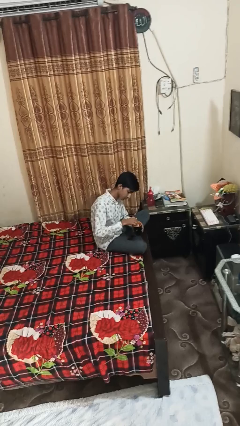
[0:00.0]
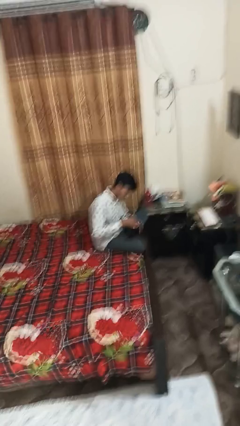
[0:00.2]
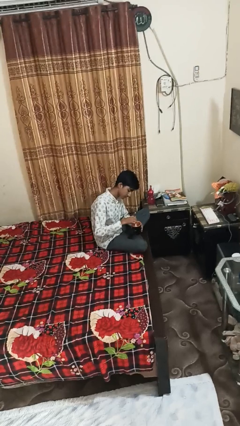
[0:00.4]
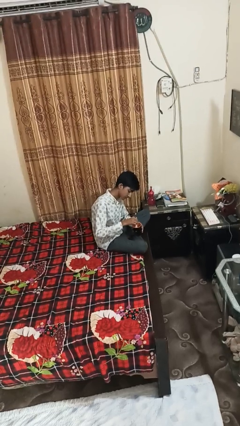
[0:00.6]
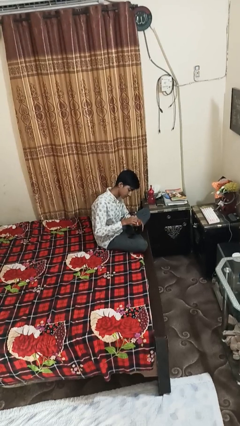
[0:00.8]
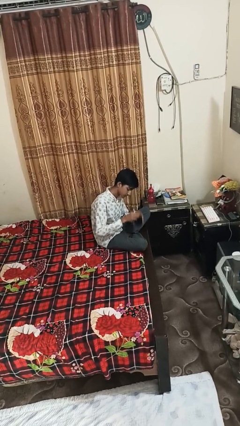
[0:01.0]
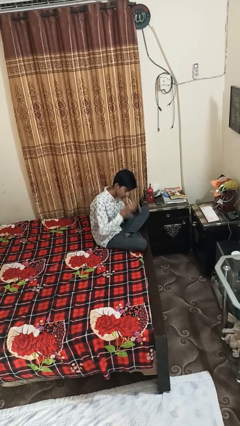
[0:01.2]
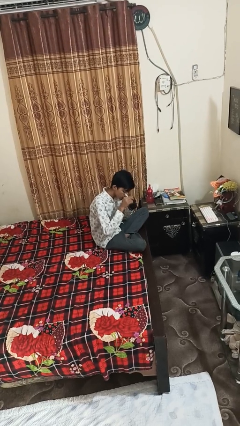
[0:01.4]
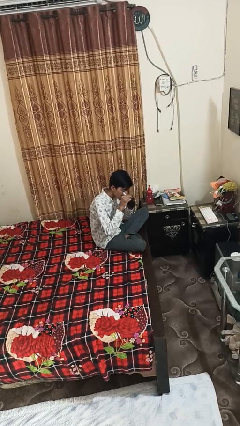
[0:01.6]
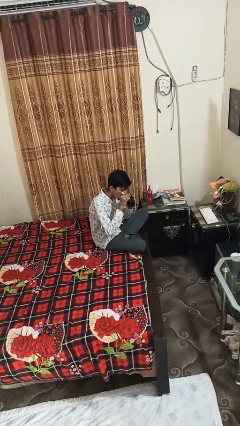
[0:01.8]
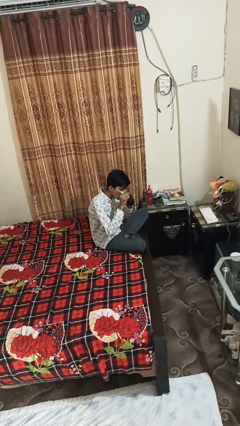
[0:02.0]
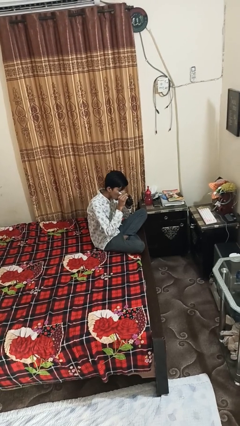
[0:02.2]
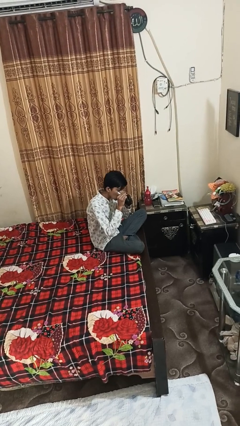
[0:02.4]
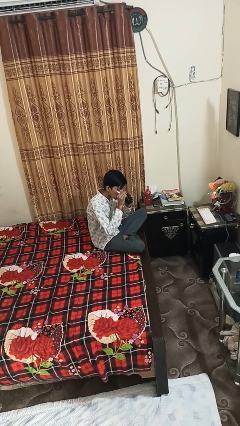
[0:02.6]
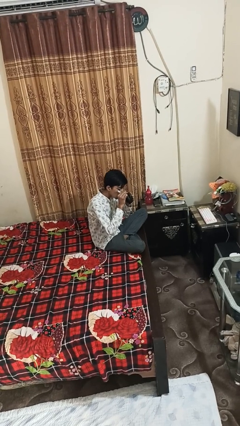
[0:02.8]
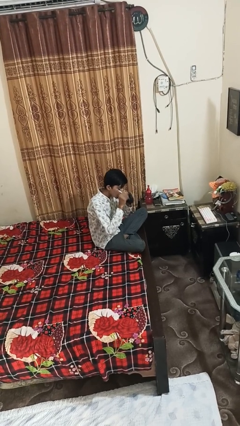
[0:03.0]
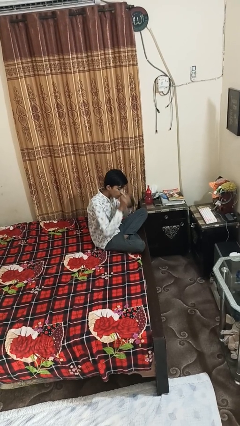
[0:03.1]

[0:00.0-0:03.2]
person drinks from mug

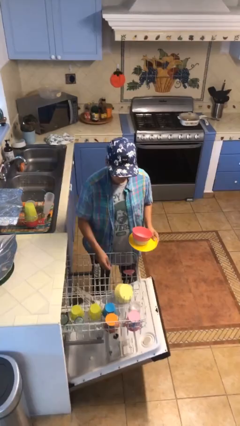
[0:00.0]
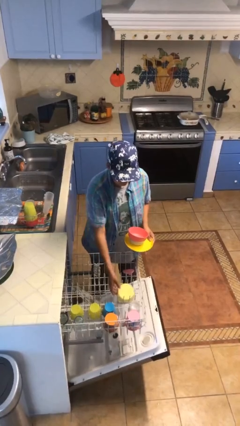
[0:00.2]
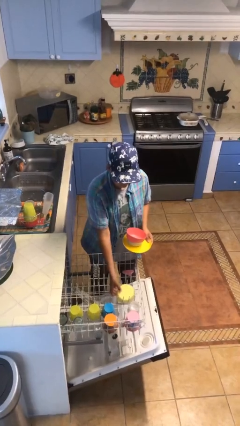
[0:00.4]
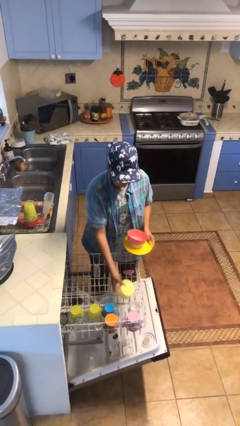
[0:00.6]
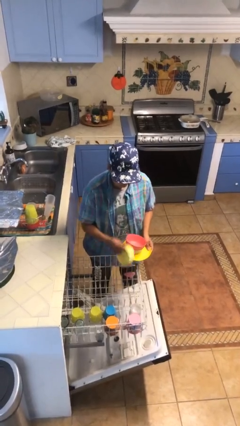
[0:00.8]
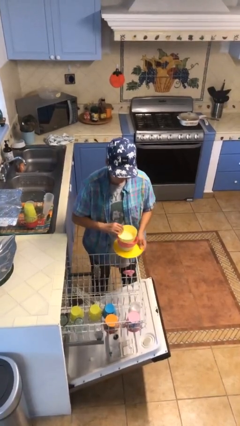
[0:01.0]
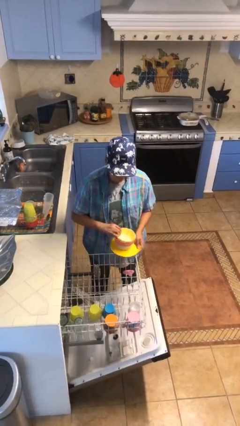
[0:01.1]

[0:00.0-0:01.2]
person unloads dishwasher

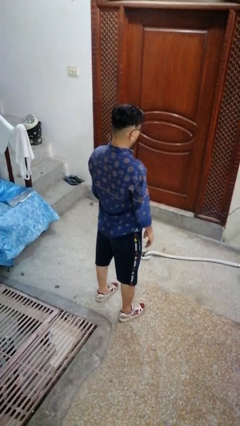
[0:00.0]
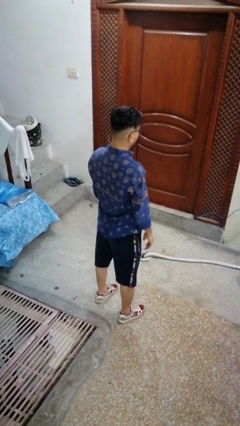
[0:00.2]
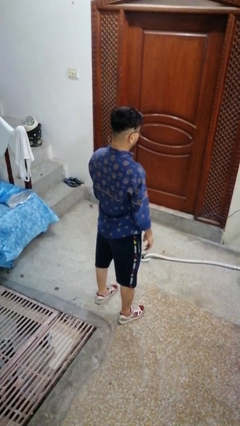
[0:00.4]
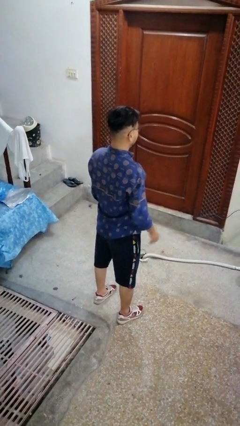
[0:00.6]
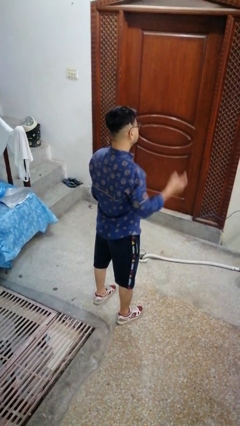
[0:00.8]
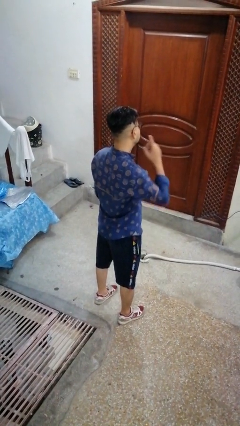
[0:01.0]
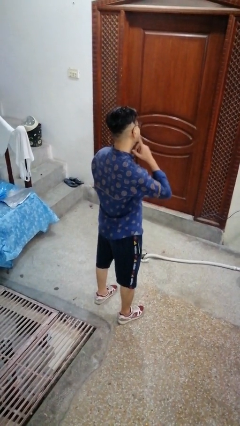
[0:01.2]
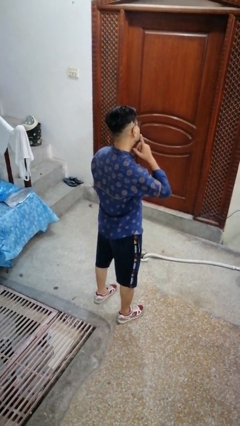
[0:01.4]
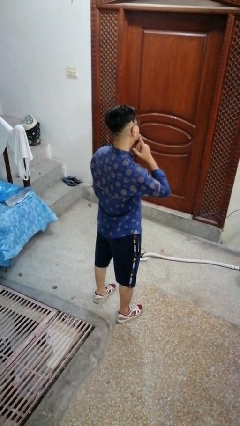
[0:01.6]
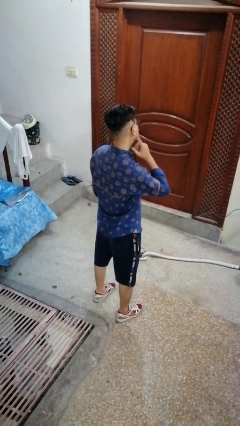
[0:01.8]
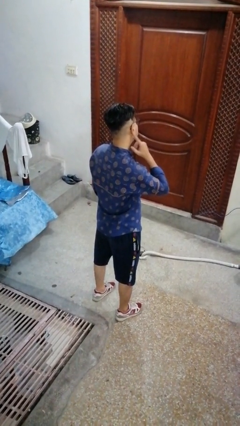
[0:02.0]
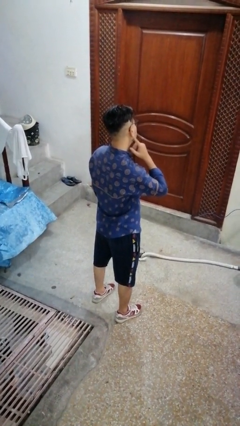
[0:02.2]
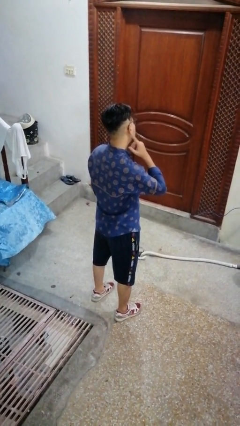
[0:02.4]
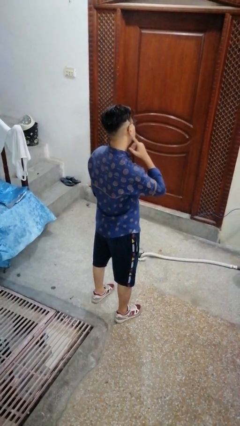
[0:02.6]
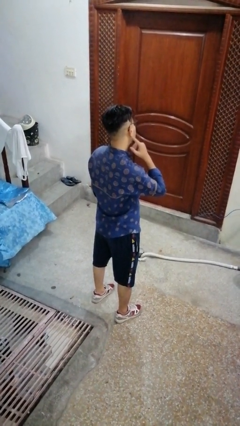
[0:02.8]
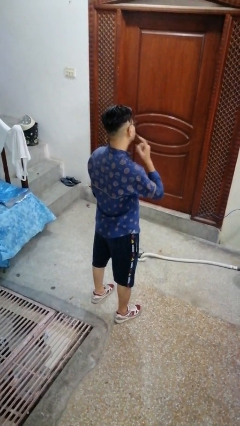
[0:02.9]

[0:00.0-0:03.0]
person gestures listen closely

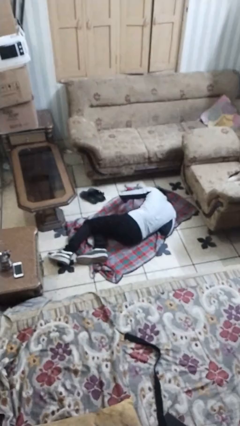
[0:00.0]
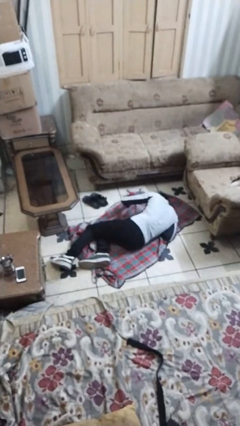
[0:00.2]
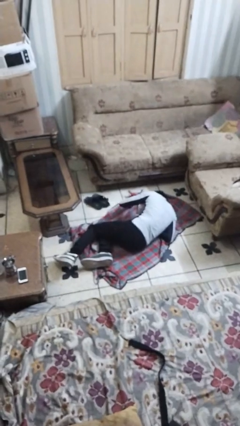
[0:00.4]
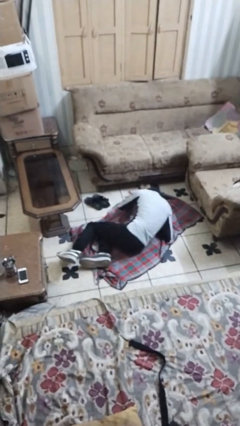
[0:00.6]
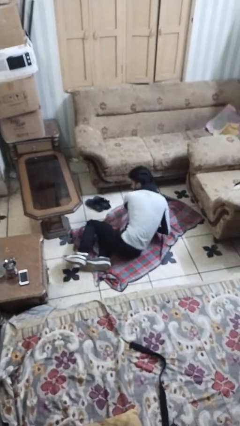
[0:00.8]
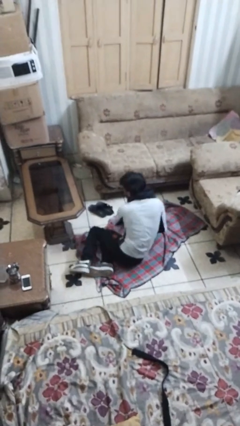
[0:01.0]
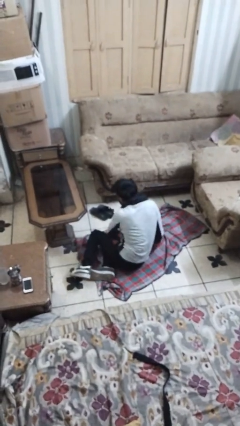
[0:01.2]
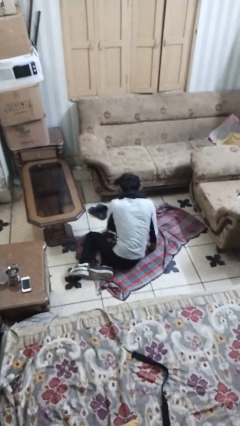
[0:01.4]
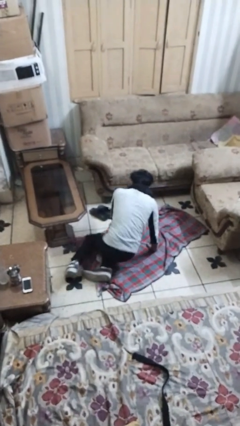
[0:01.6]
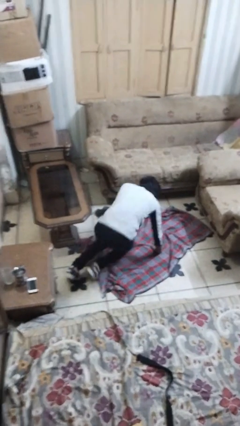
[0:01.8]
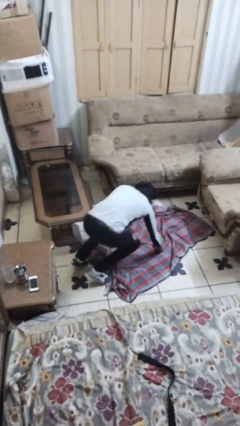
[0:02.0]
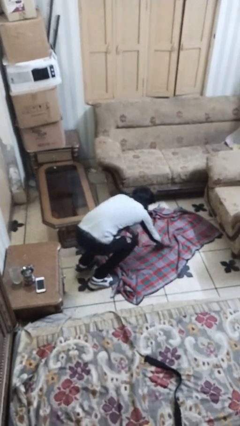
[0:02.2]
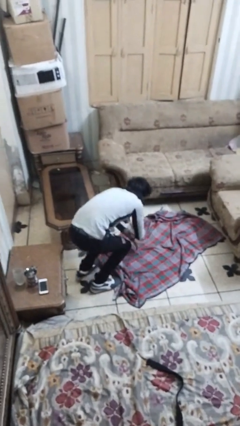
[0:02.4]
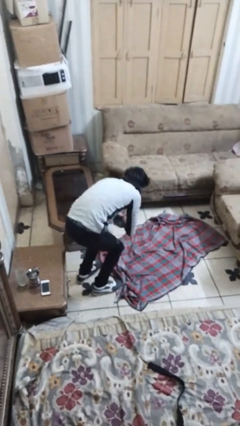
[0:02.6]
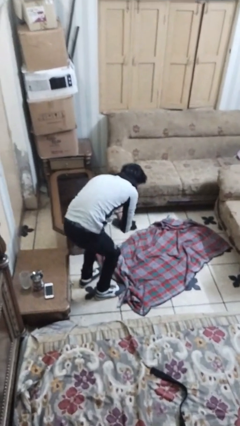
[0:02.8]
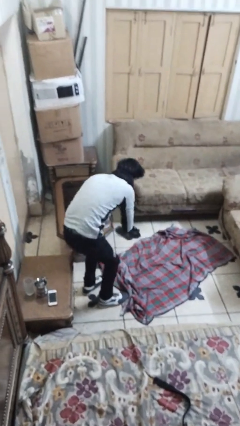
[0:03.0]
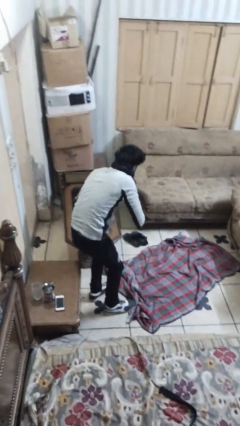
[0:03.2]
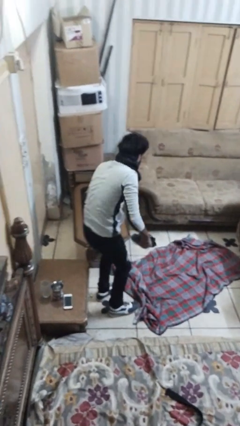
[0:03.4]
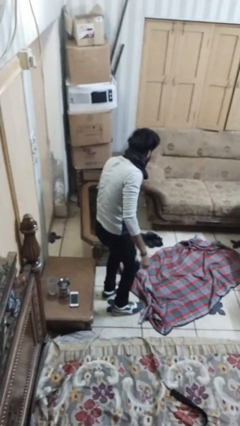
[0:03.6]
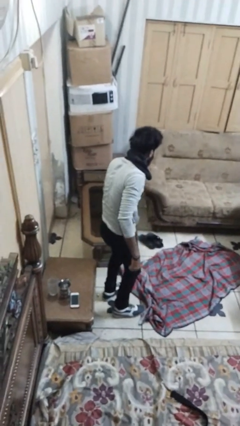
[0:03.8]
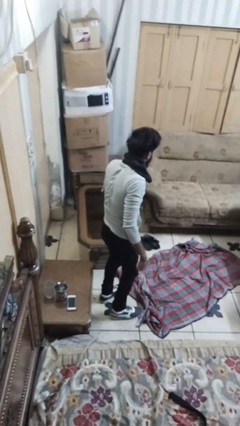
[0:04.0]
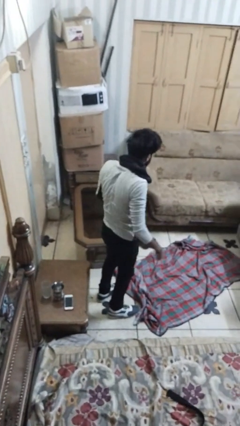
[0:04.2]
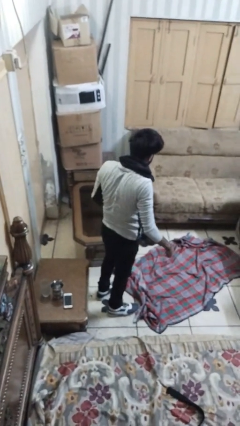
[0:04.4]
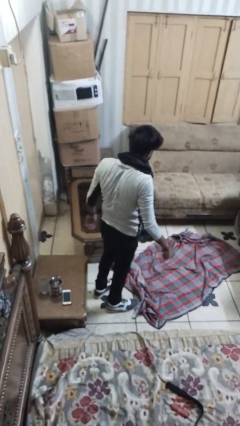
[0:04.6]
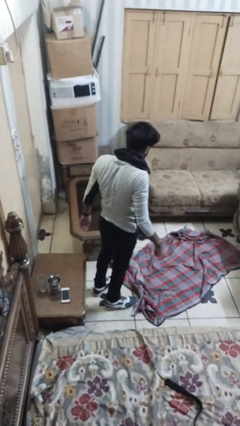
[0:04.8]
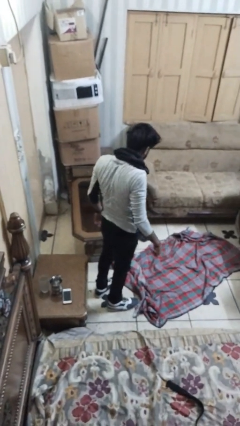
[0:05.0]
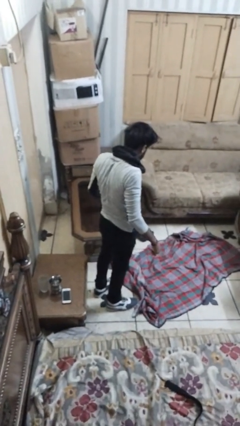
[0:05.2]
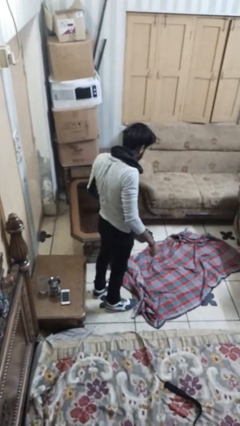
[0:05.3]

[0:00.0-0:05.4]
person stands up from floor

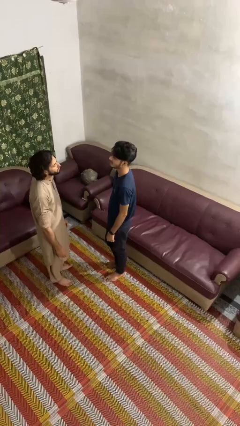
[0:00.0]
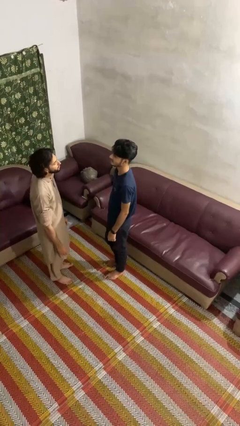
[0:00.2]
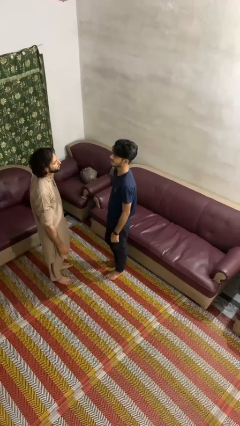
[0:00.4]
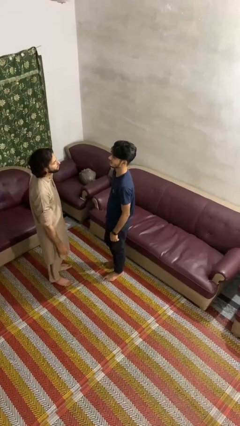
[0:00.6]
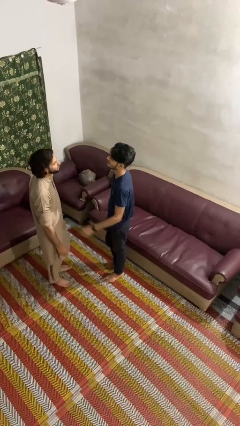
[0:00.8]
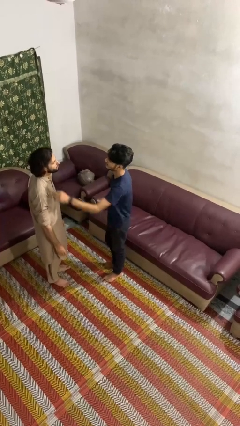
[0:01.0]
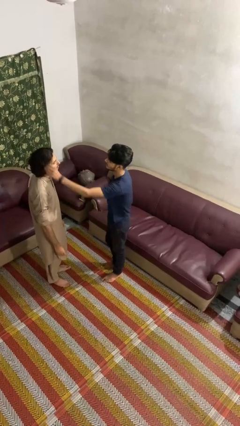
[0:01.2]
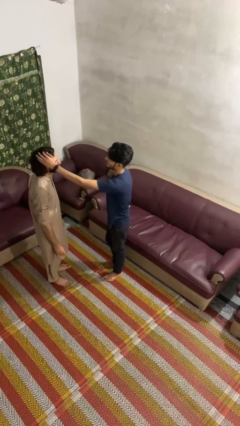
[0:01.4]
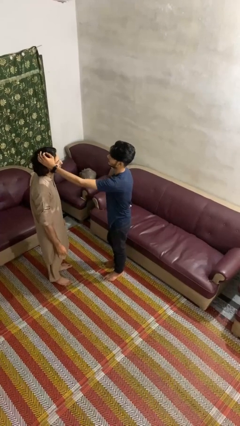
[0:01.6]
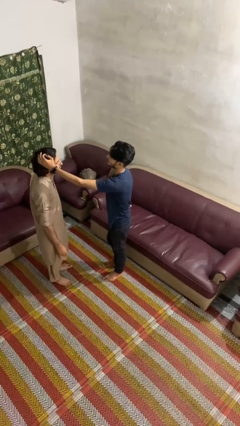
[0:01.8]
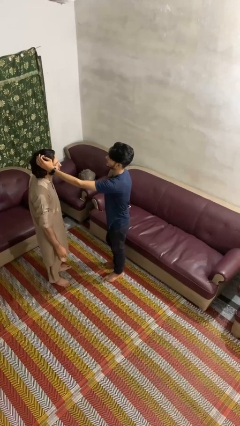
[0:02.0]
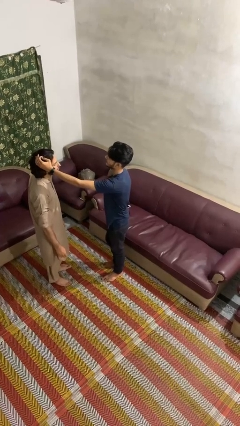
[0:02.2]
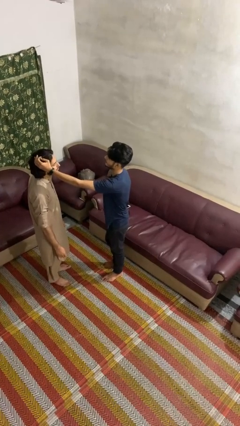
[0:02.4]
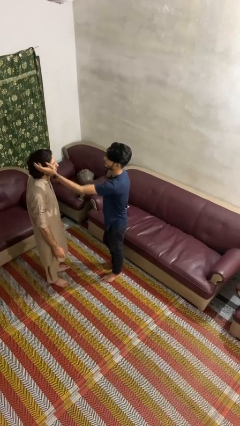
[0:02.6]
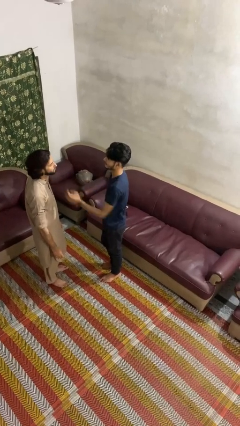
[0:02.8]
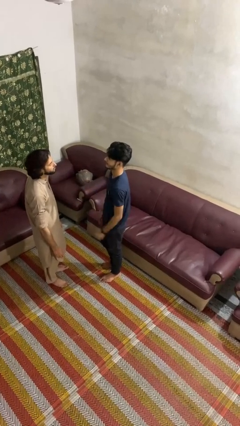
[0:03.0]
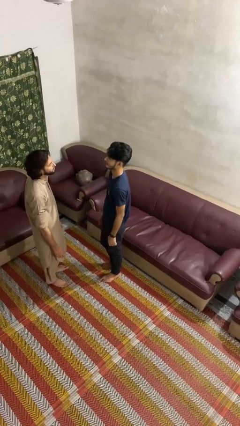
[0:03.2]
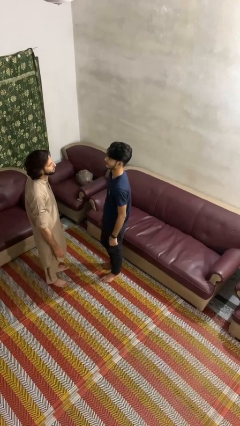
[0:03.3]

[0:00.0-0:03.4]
person grabs person by hair

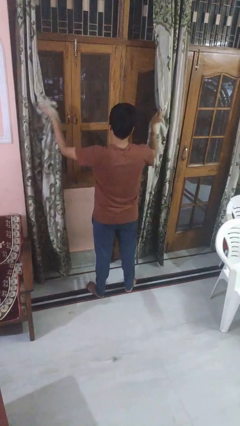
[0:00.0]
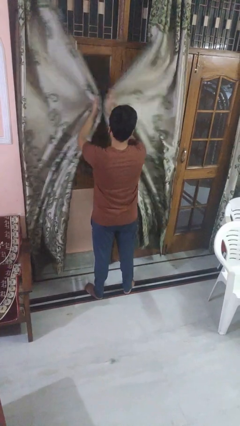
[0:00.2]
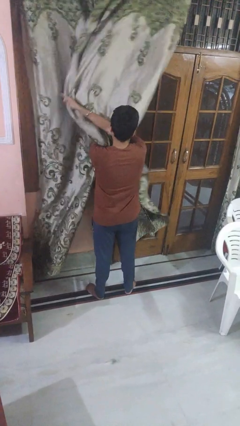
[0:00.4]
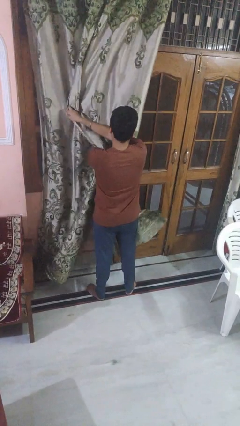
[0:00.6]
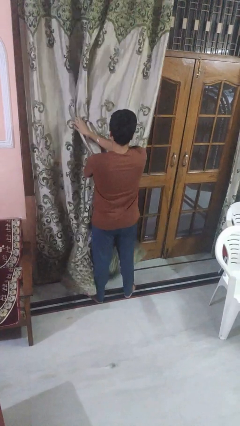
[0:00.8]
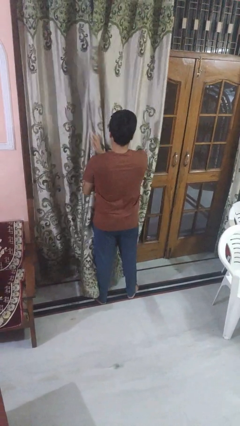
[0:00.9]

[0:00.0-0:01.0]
person closes curtains
